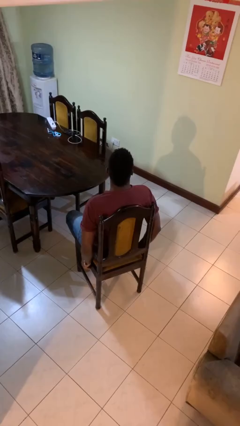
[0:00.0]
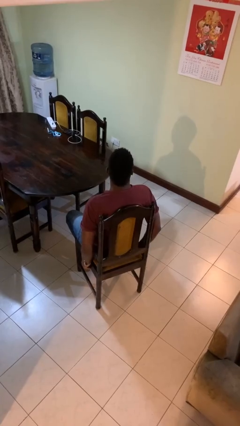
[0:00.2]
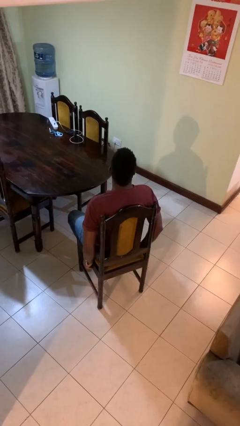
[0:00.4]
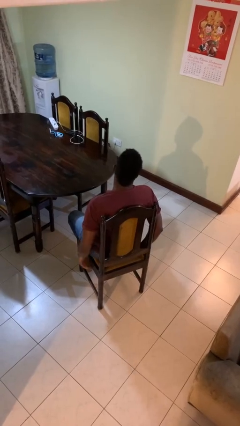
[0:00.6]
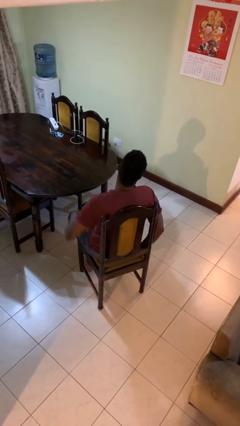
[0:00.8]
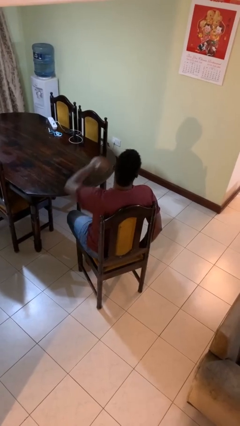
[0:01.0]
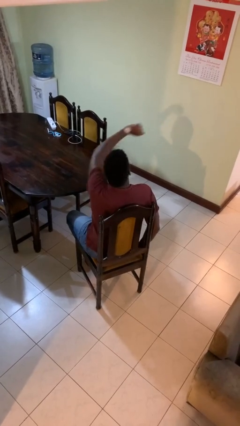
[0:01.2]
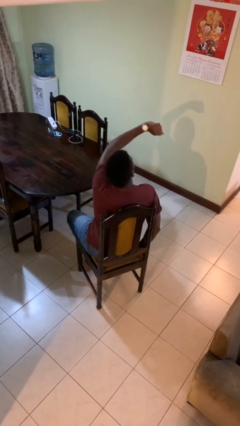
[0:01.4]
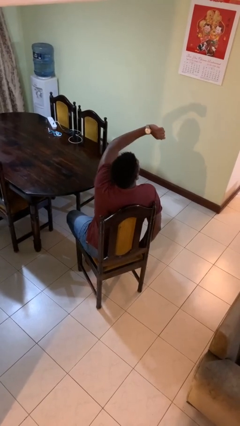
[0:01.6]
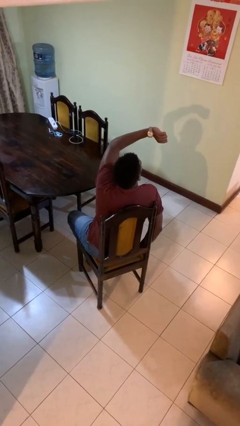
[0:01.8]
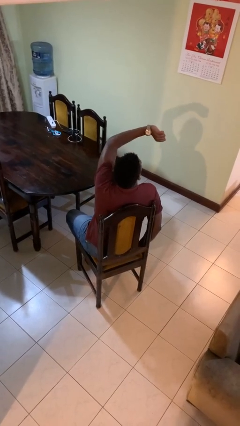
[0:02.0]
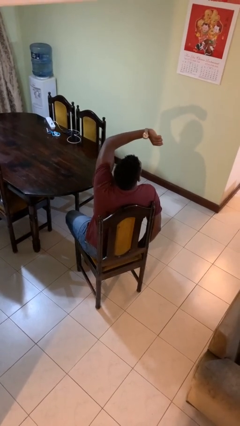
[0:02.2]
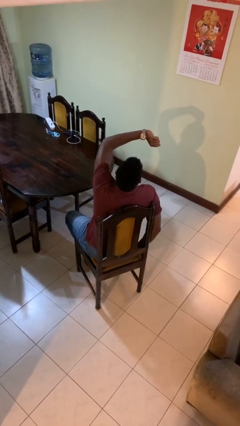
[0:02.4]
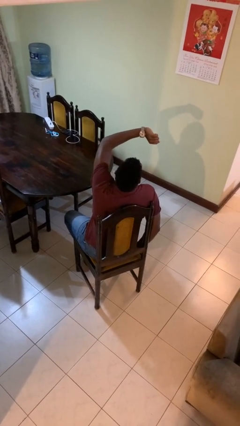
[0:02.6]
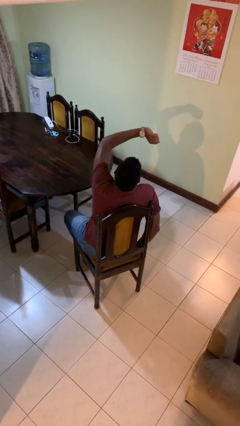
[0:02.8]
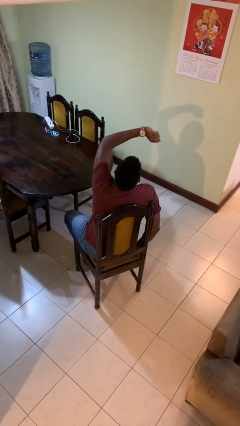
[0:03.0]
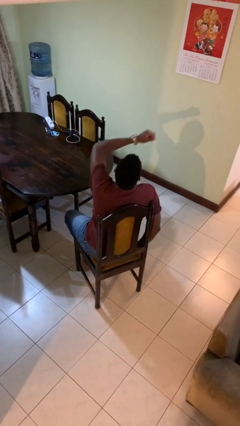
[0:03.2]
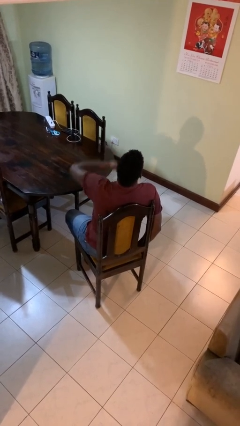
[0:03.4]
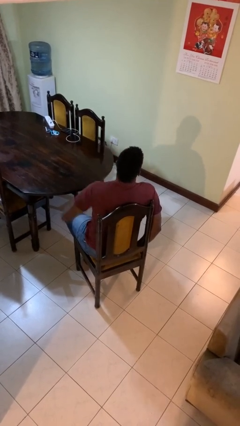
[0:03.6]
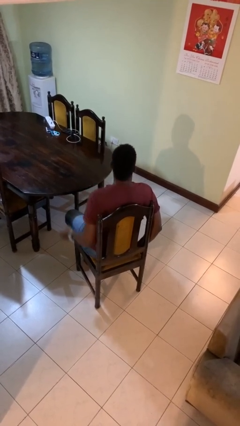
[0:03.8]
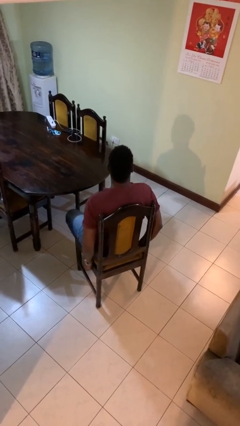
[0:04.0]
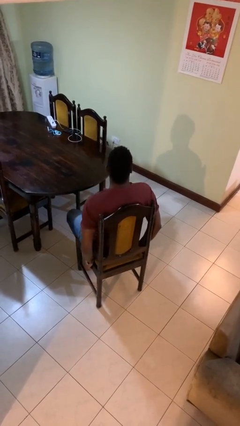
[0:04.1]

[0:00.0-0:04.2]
person looks at wristwatch

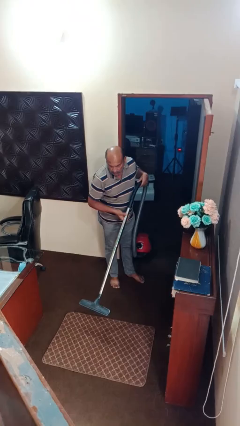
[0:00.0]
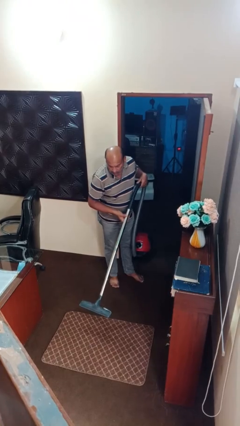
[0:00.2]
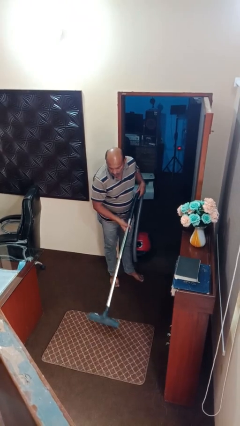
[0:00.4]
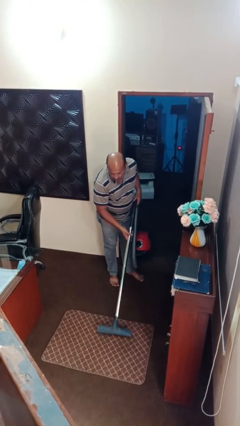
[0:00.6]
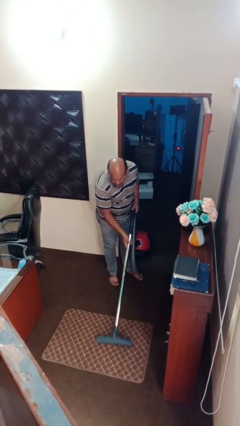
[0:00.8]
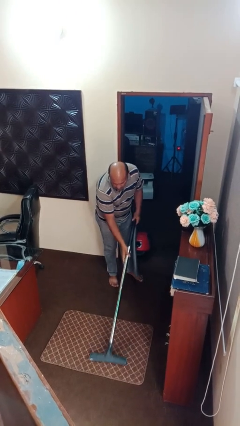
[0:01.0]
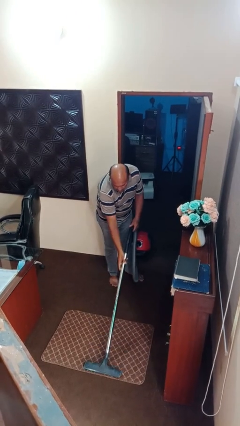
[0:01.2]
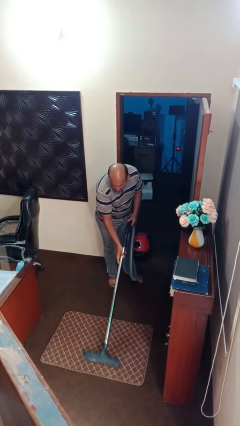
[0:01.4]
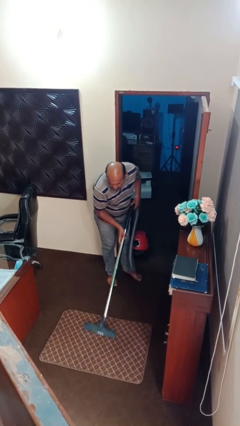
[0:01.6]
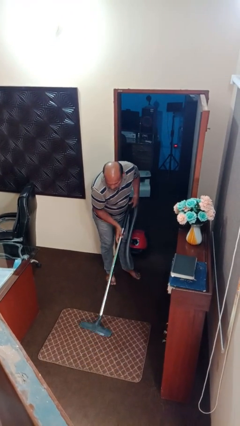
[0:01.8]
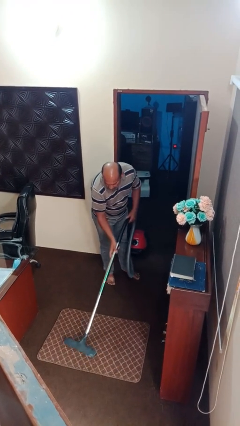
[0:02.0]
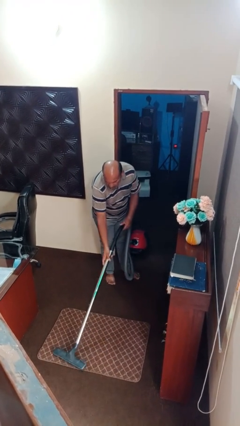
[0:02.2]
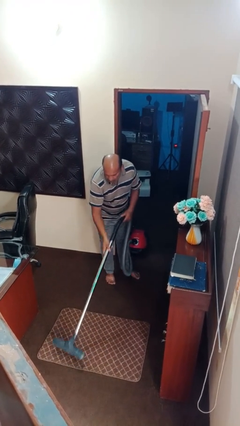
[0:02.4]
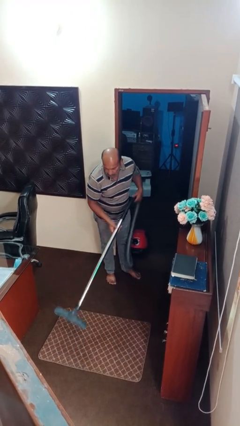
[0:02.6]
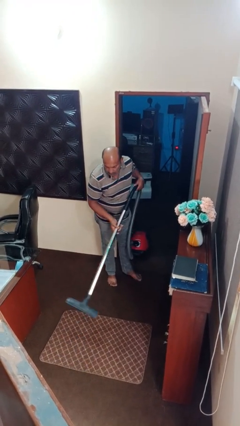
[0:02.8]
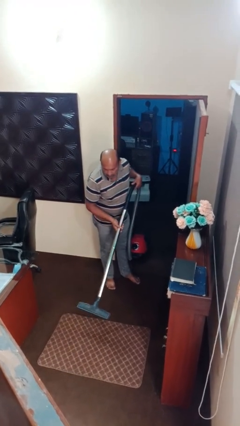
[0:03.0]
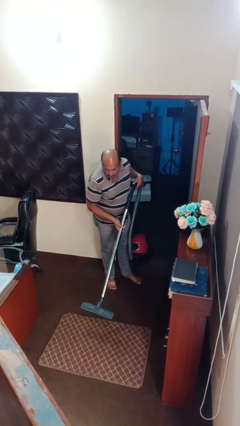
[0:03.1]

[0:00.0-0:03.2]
person vacuums carpet

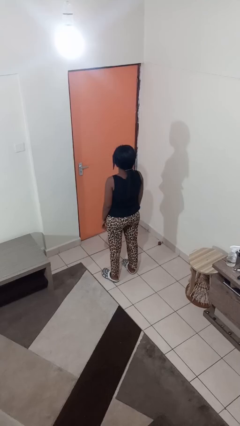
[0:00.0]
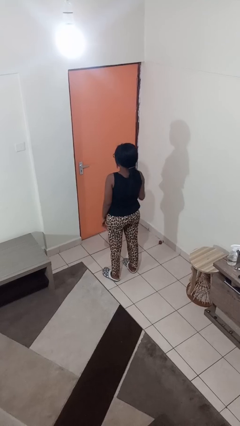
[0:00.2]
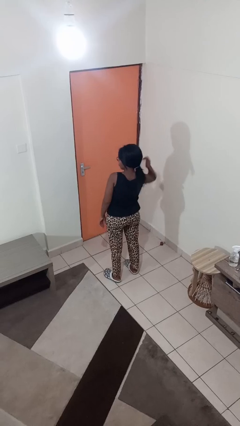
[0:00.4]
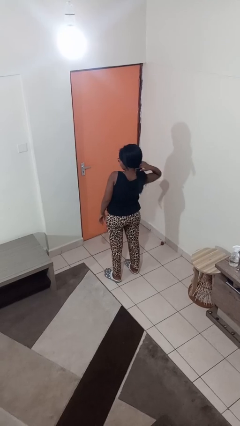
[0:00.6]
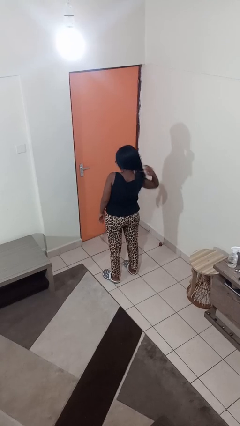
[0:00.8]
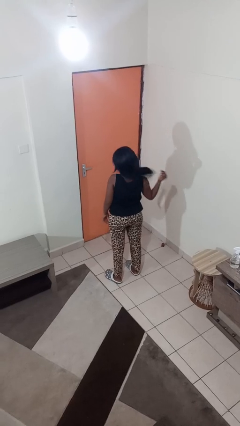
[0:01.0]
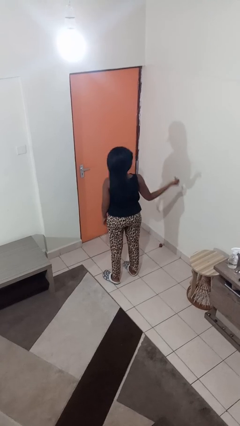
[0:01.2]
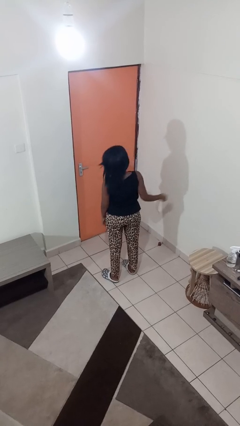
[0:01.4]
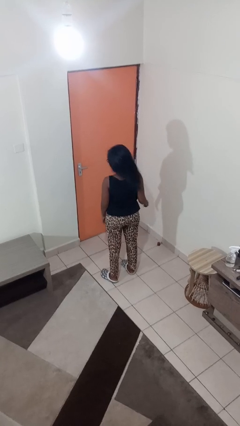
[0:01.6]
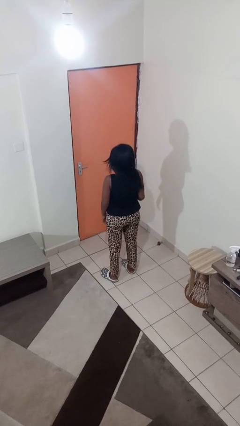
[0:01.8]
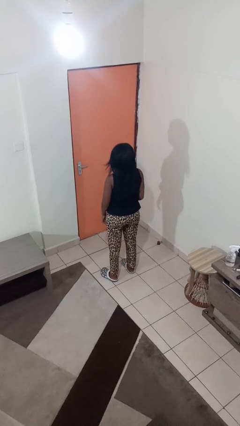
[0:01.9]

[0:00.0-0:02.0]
person takes off hairtie

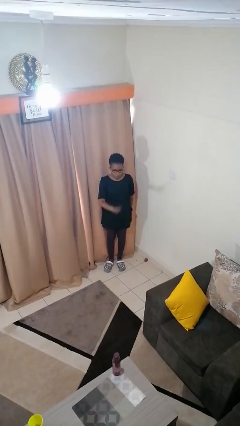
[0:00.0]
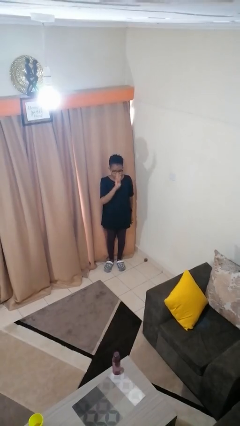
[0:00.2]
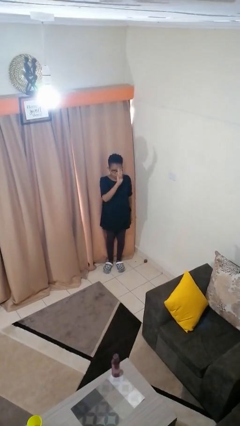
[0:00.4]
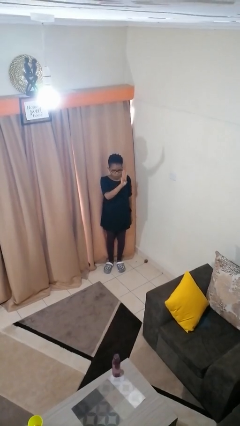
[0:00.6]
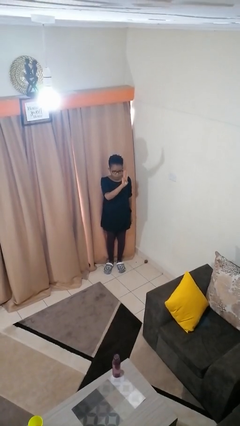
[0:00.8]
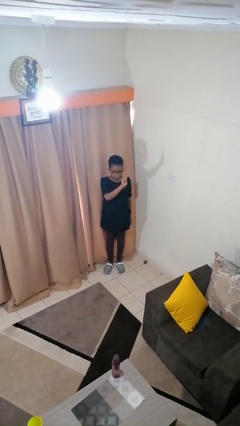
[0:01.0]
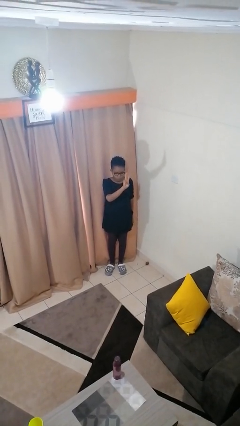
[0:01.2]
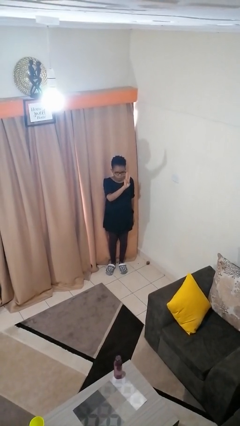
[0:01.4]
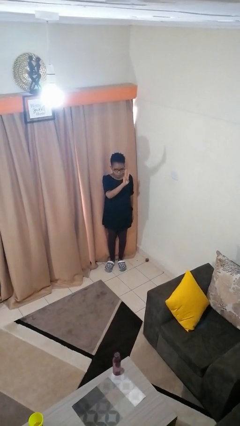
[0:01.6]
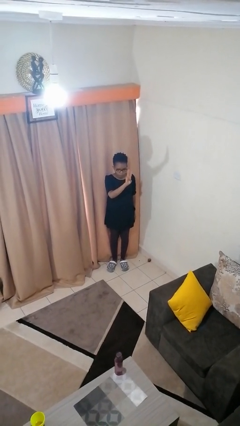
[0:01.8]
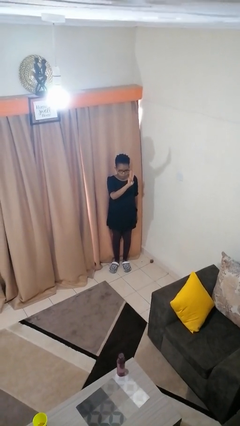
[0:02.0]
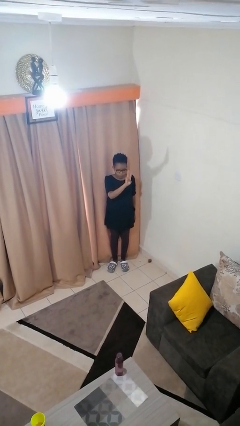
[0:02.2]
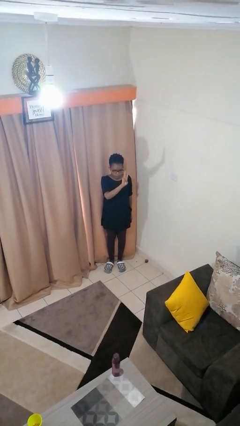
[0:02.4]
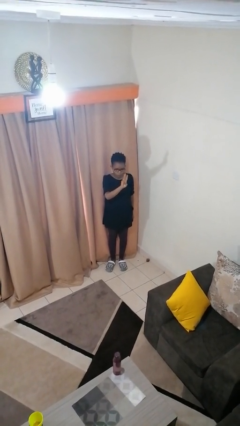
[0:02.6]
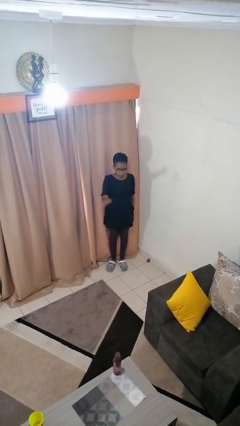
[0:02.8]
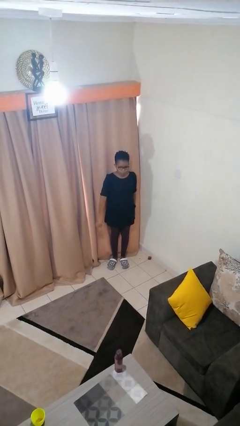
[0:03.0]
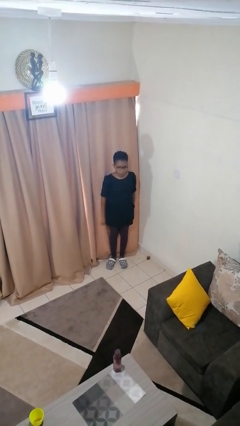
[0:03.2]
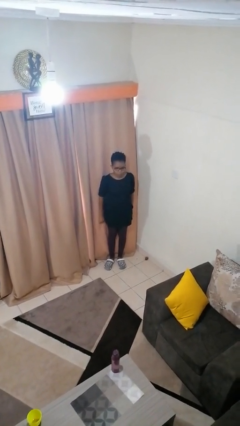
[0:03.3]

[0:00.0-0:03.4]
person gestures number three

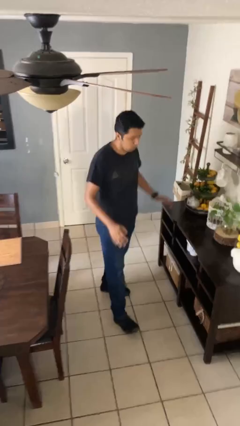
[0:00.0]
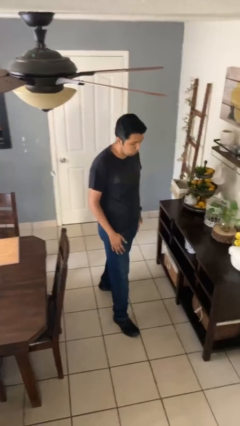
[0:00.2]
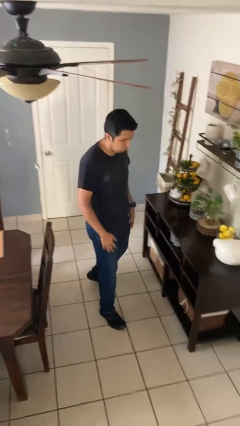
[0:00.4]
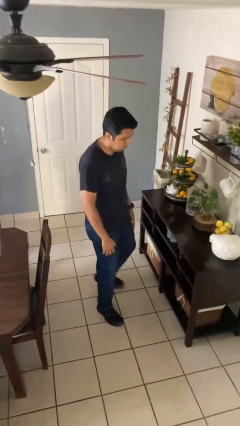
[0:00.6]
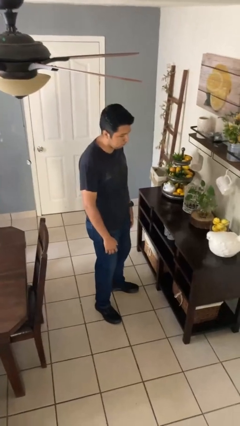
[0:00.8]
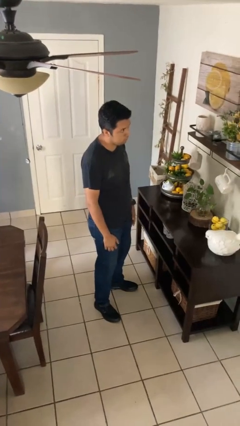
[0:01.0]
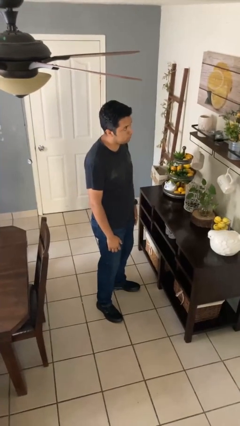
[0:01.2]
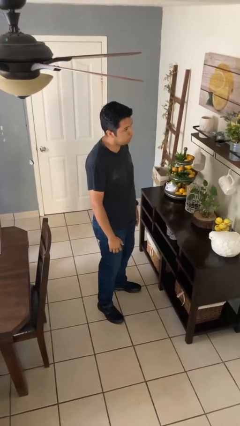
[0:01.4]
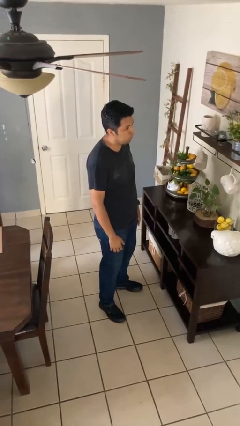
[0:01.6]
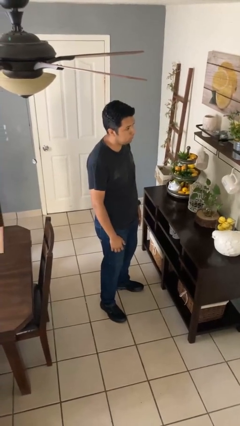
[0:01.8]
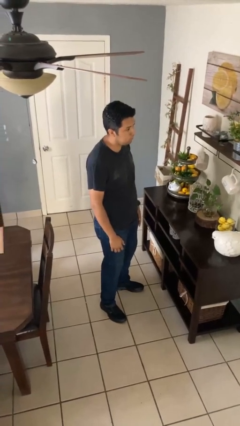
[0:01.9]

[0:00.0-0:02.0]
person slaps hands on thighs

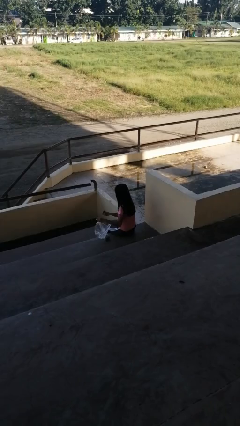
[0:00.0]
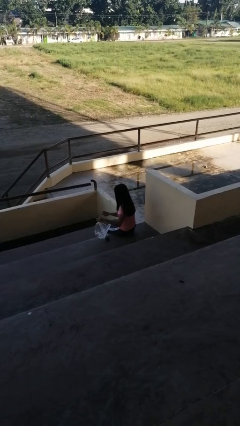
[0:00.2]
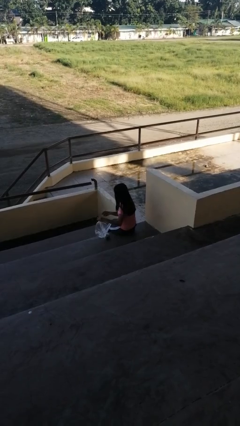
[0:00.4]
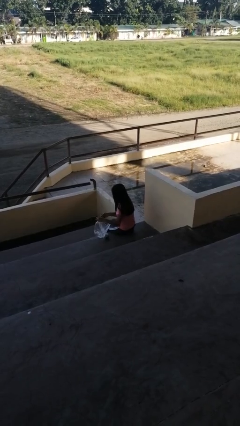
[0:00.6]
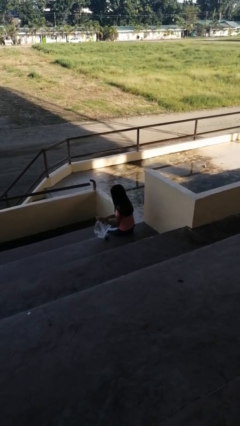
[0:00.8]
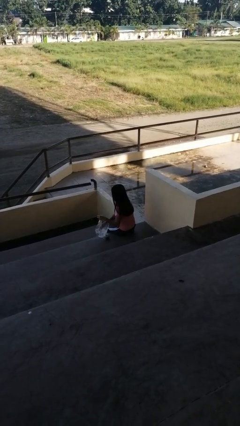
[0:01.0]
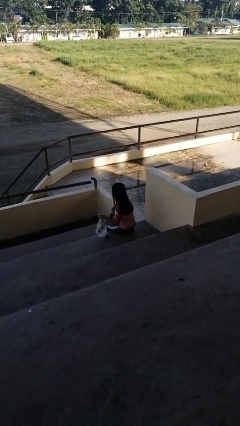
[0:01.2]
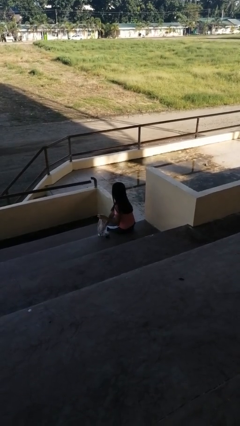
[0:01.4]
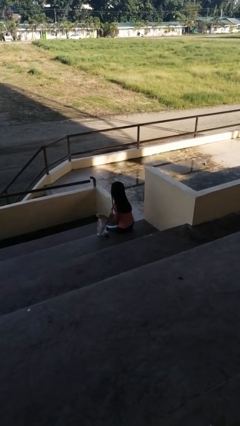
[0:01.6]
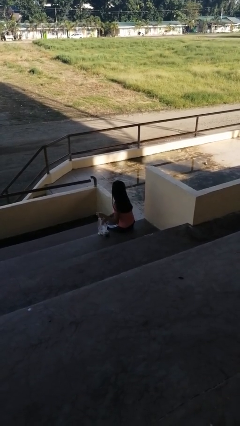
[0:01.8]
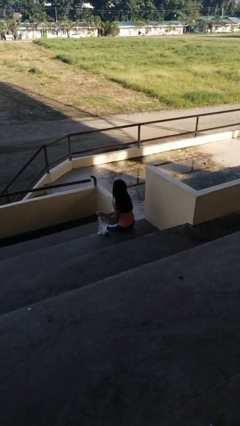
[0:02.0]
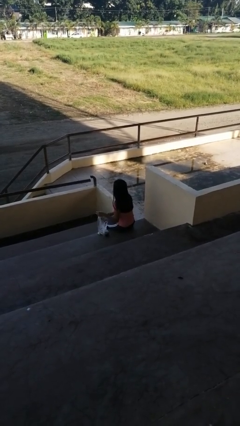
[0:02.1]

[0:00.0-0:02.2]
person puts object into bag

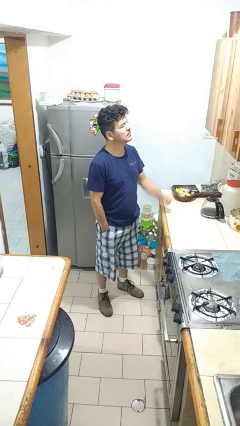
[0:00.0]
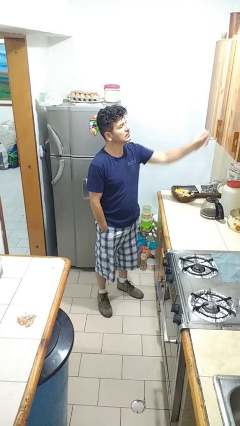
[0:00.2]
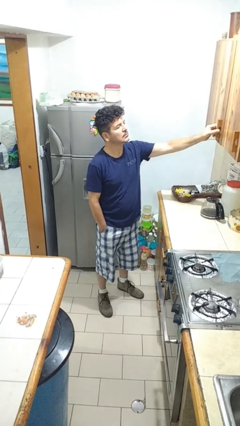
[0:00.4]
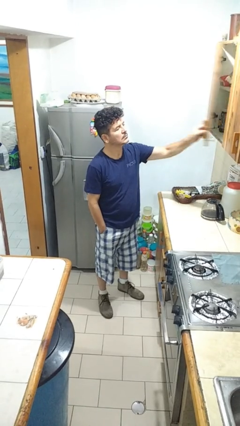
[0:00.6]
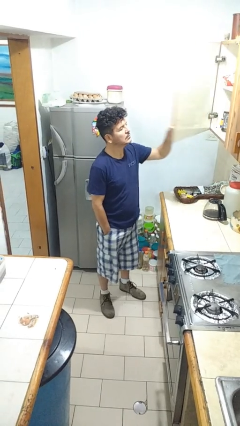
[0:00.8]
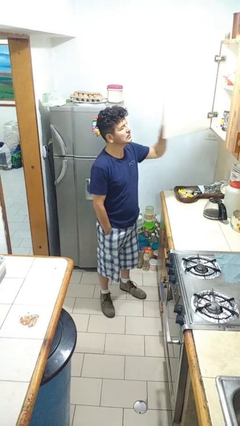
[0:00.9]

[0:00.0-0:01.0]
person opens cabinet
